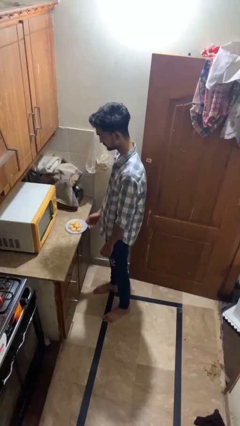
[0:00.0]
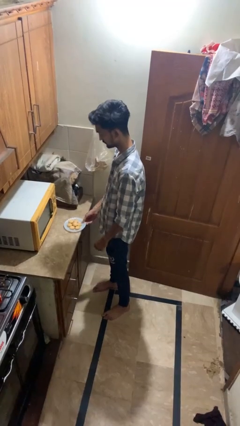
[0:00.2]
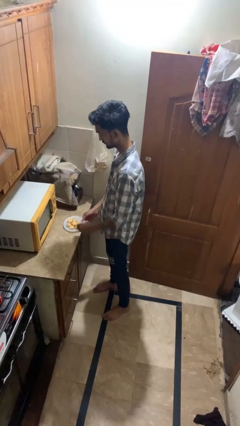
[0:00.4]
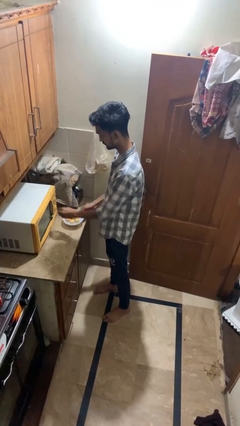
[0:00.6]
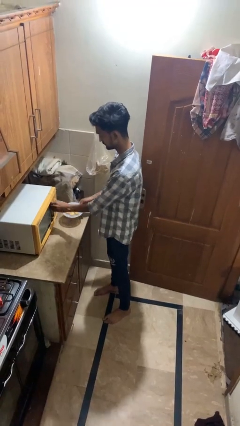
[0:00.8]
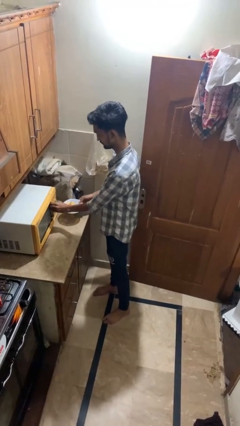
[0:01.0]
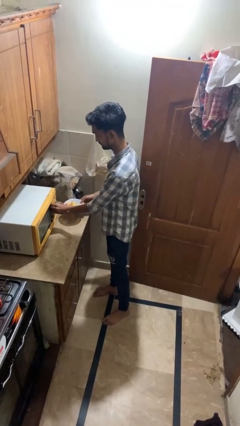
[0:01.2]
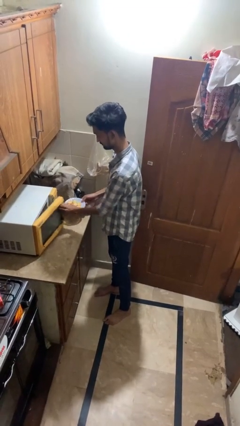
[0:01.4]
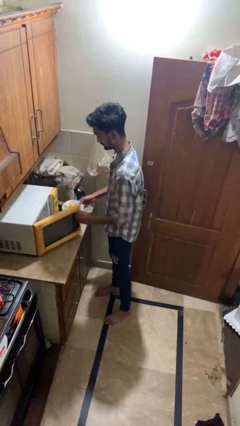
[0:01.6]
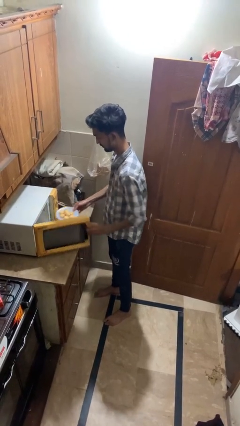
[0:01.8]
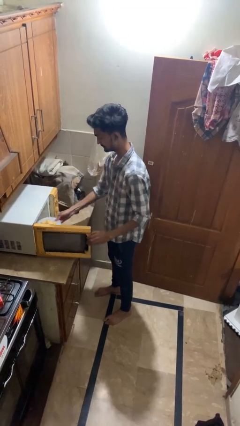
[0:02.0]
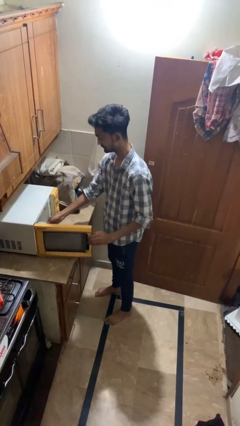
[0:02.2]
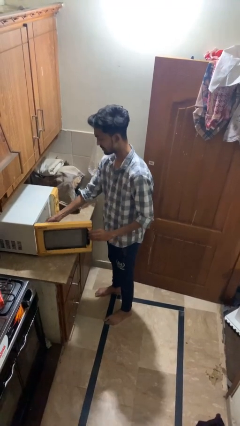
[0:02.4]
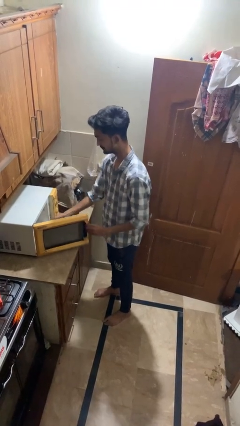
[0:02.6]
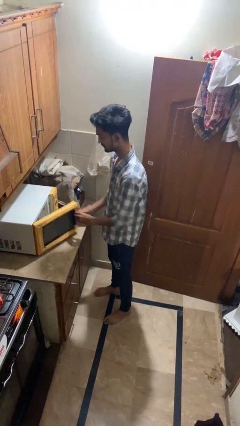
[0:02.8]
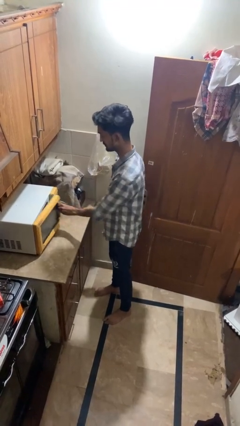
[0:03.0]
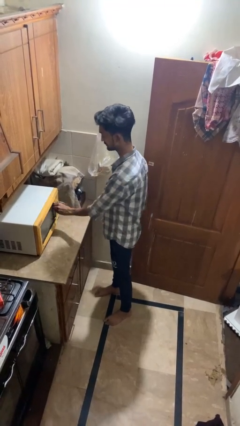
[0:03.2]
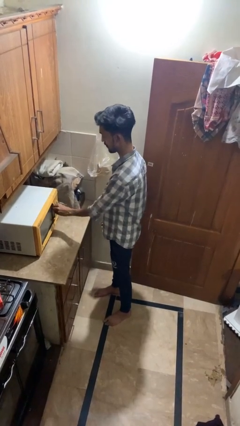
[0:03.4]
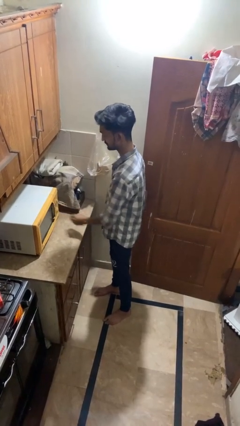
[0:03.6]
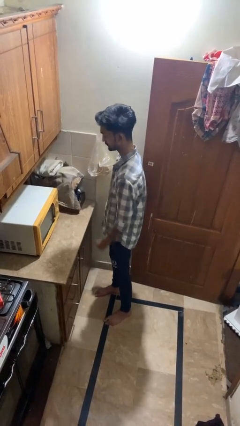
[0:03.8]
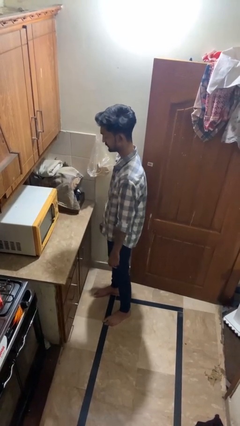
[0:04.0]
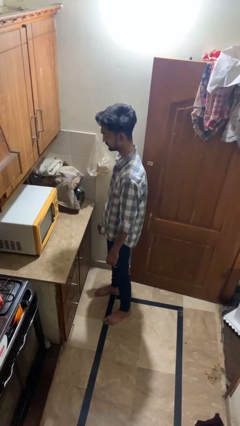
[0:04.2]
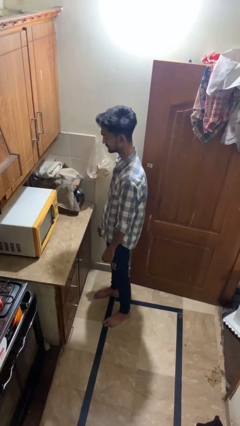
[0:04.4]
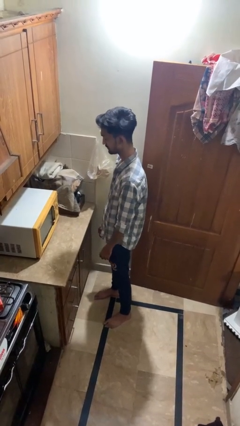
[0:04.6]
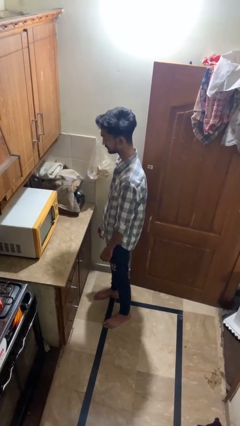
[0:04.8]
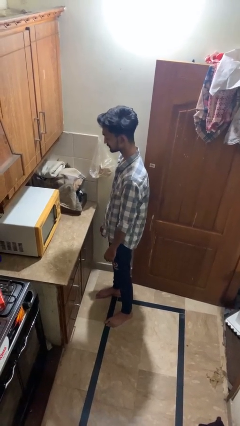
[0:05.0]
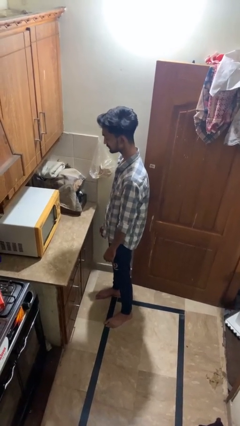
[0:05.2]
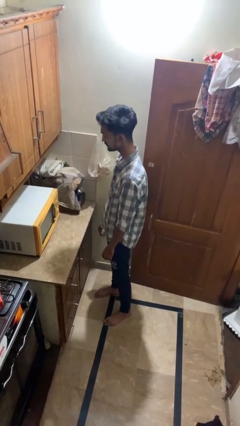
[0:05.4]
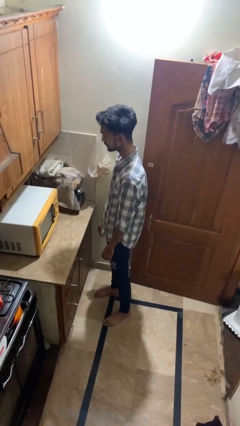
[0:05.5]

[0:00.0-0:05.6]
person puts object into microwave

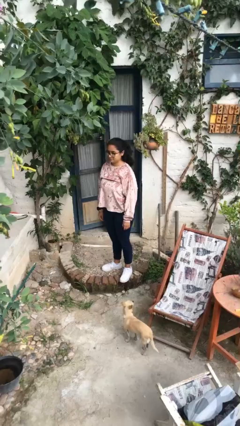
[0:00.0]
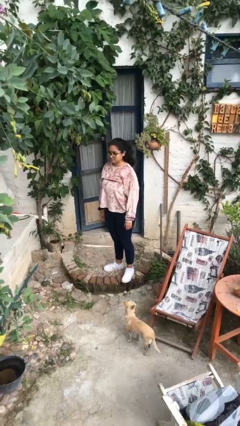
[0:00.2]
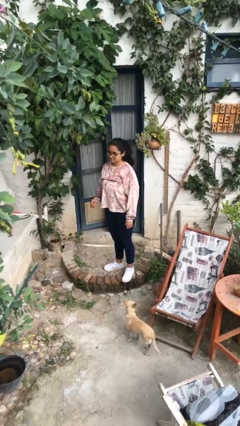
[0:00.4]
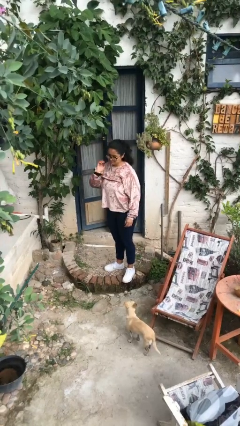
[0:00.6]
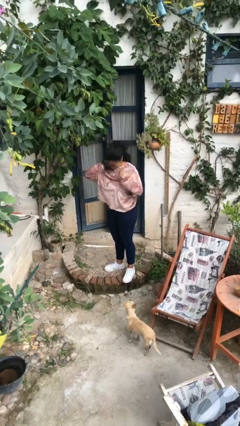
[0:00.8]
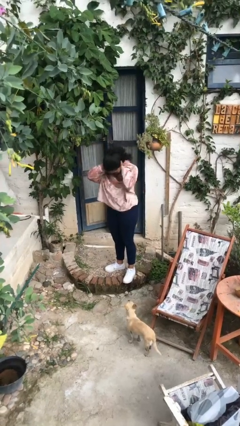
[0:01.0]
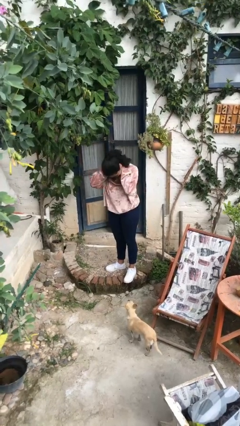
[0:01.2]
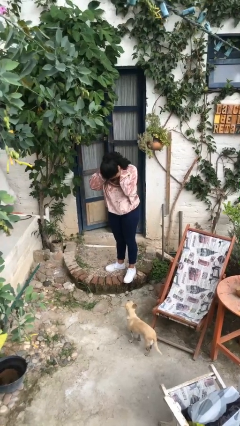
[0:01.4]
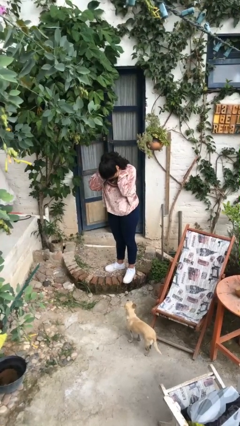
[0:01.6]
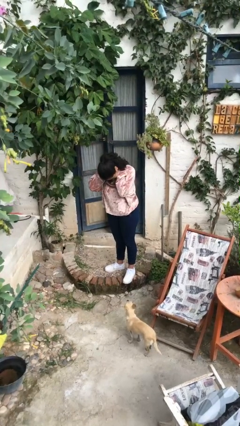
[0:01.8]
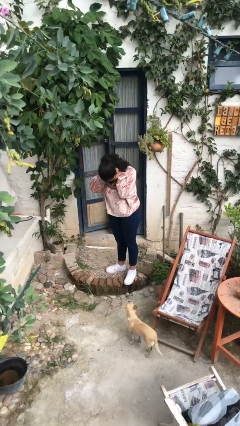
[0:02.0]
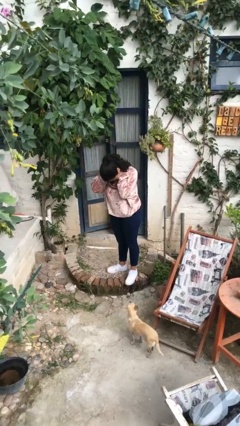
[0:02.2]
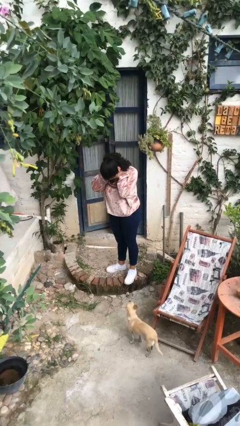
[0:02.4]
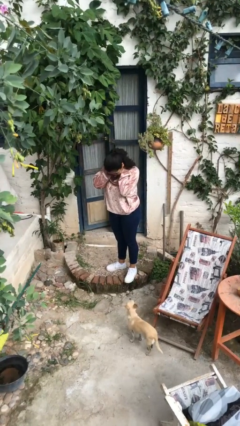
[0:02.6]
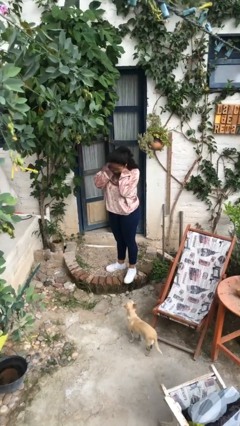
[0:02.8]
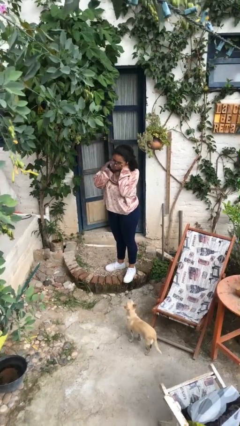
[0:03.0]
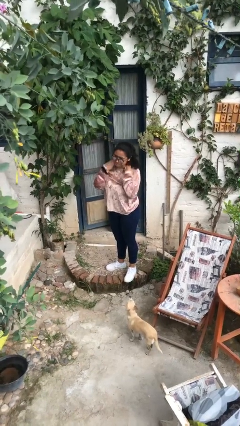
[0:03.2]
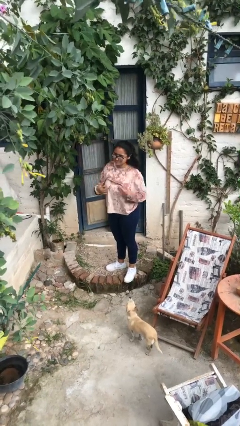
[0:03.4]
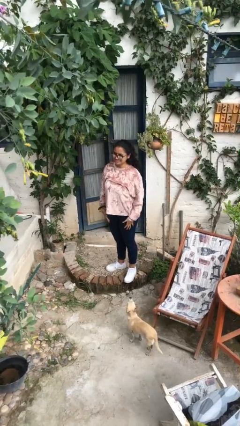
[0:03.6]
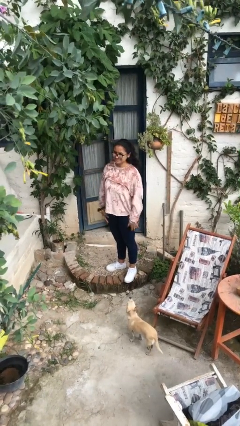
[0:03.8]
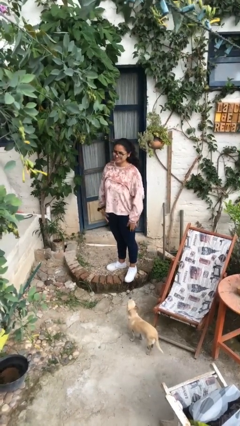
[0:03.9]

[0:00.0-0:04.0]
person rubs neck

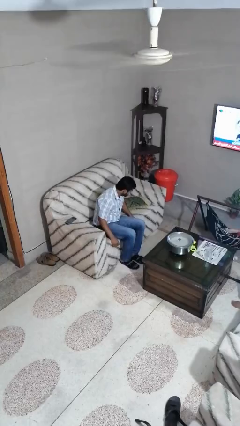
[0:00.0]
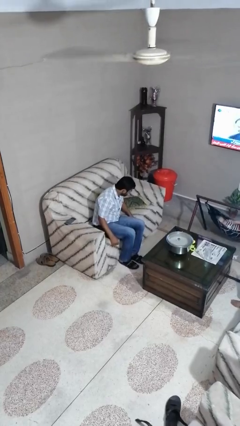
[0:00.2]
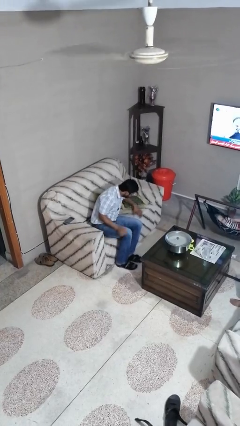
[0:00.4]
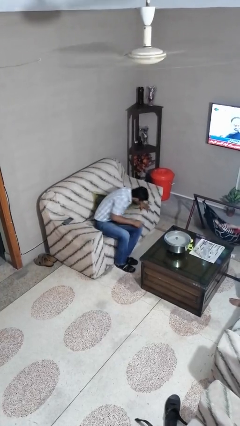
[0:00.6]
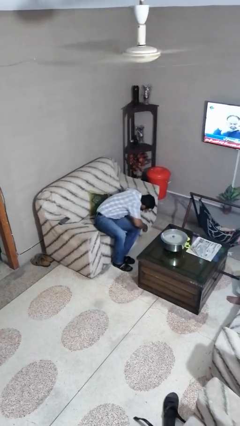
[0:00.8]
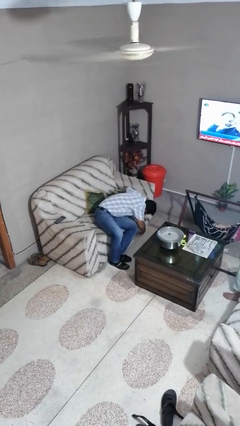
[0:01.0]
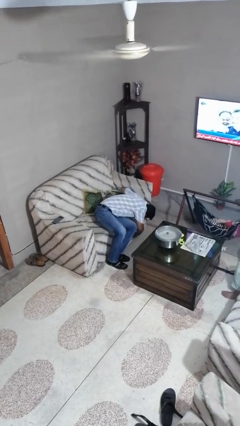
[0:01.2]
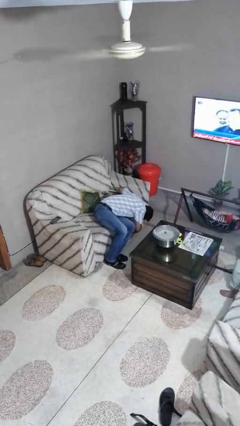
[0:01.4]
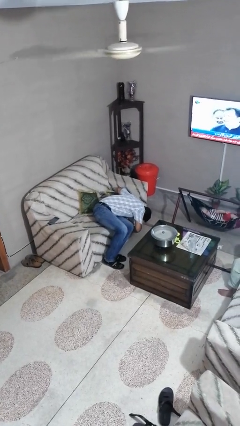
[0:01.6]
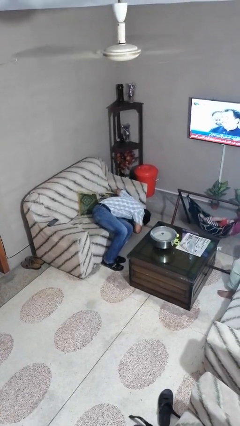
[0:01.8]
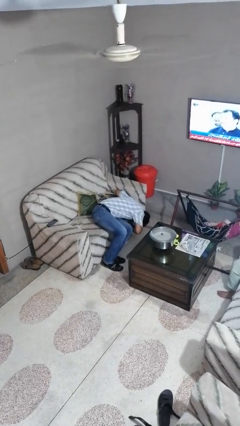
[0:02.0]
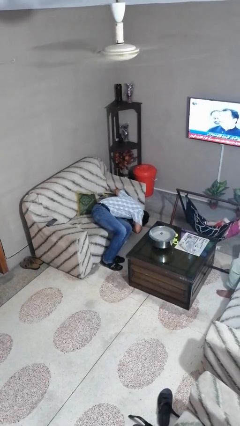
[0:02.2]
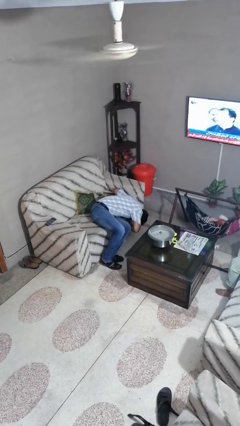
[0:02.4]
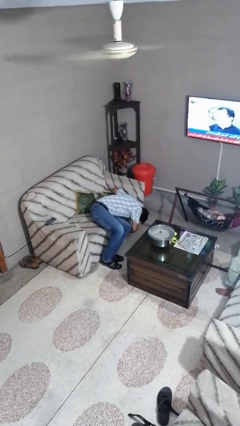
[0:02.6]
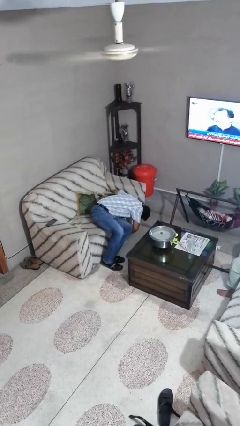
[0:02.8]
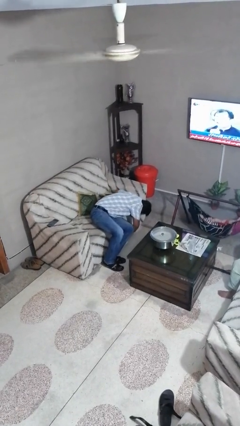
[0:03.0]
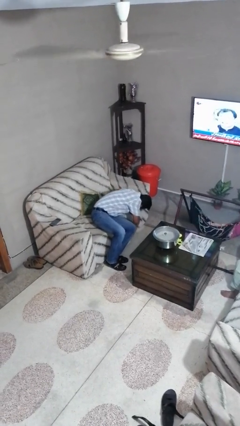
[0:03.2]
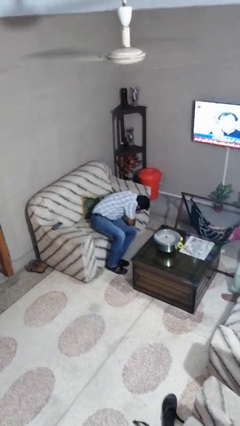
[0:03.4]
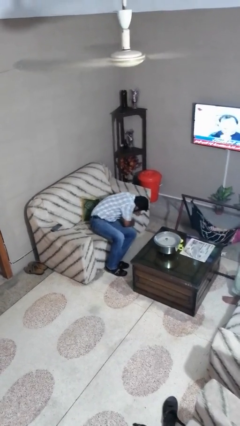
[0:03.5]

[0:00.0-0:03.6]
person searches under couch

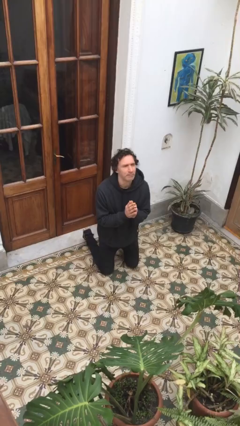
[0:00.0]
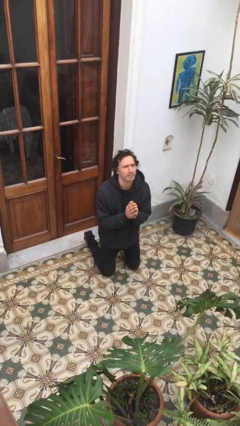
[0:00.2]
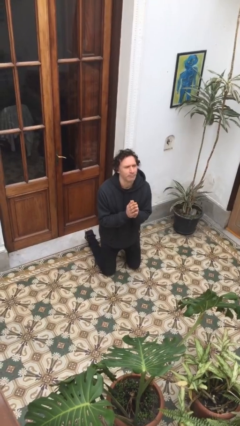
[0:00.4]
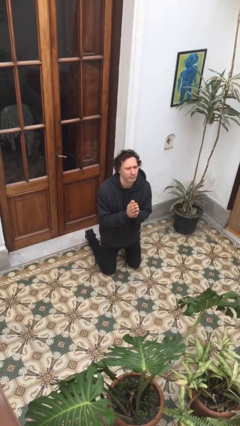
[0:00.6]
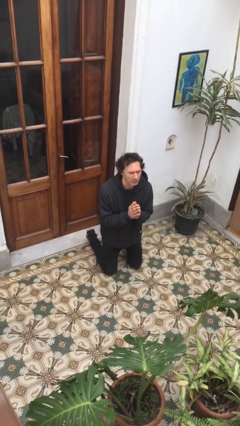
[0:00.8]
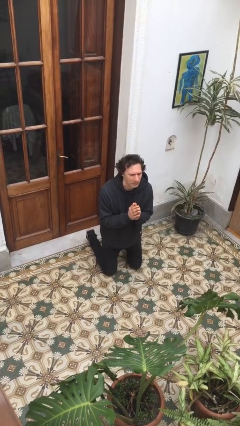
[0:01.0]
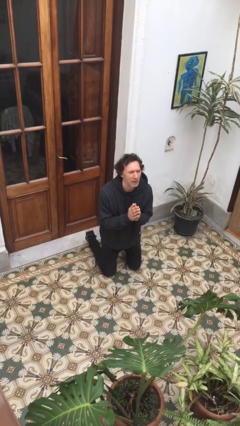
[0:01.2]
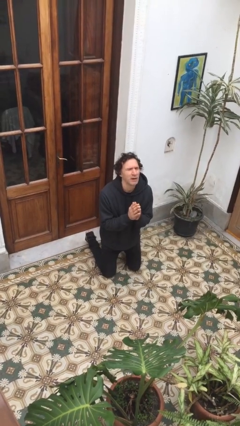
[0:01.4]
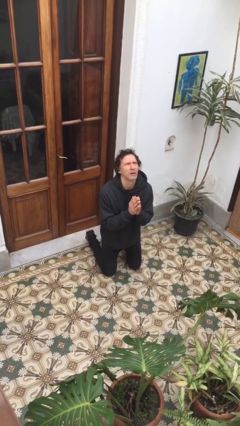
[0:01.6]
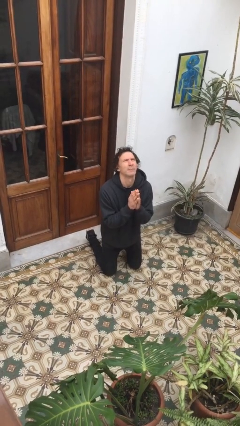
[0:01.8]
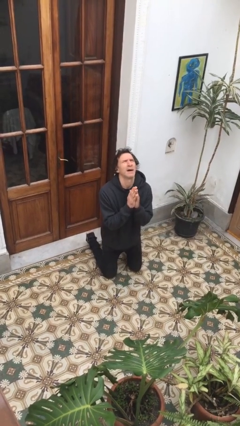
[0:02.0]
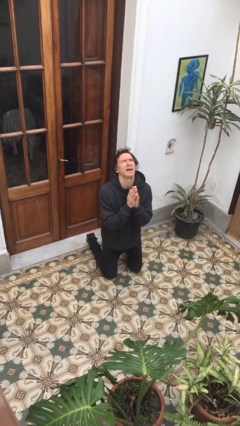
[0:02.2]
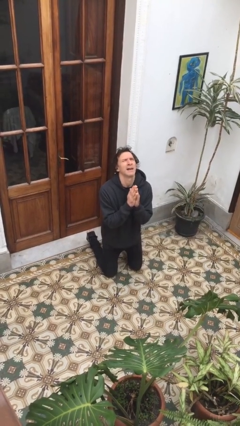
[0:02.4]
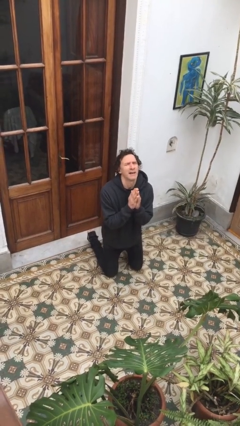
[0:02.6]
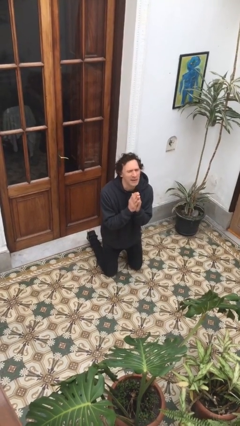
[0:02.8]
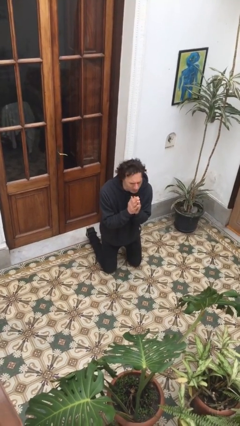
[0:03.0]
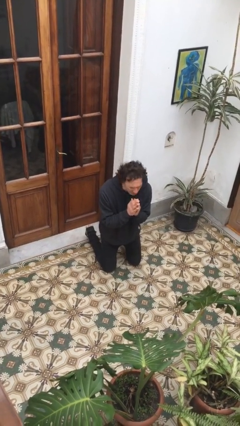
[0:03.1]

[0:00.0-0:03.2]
person prays

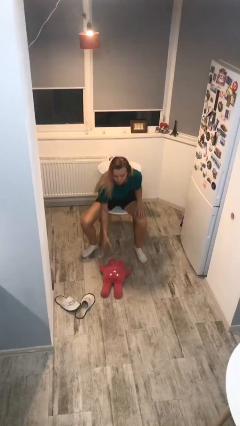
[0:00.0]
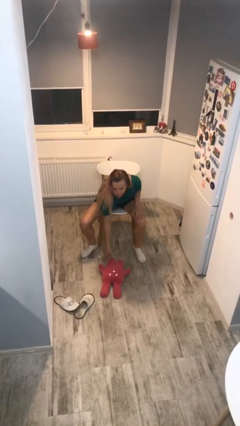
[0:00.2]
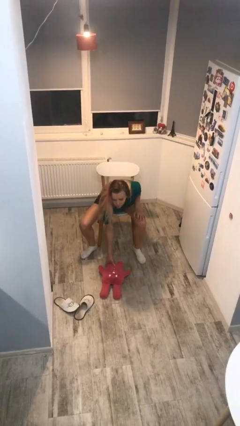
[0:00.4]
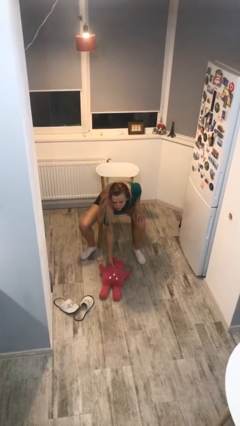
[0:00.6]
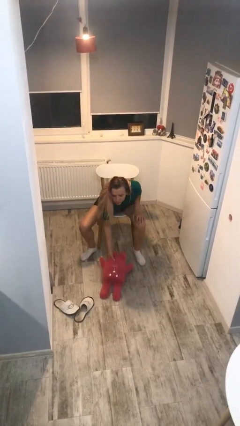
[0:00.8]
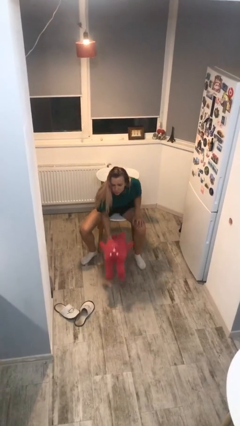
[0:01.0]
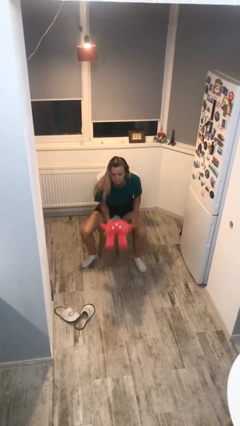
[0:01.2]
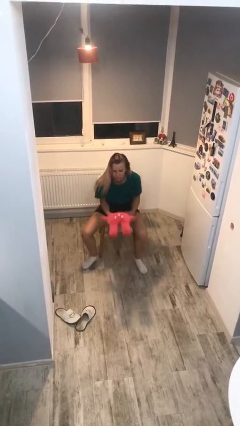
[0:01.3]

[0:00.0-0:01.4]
person picks up object from floor

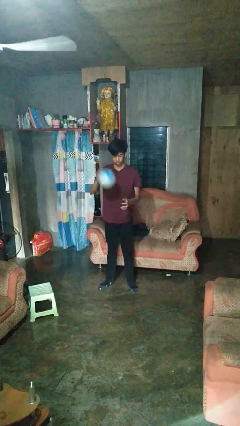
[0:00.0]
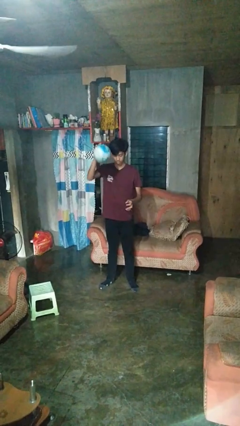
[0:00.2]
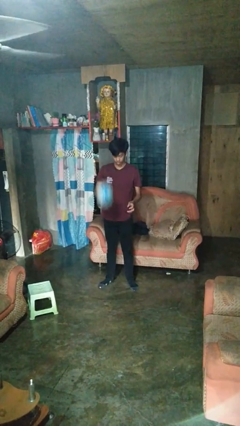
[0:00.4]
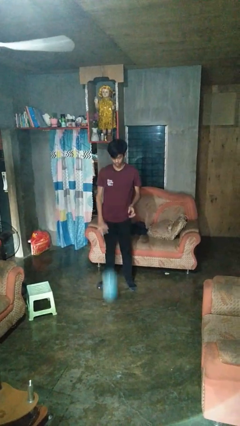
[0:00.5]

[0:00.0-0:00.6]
person bounces ball on floor
